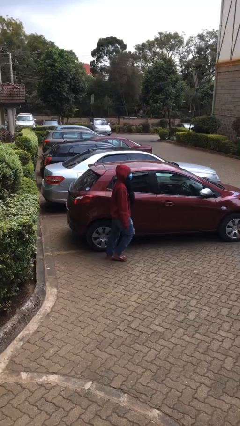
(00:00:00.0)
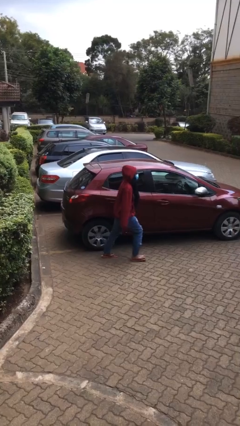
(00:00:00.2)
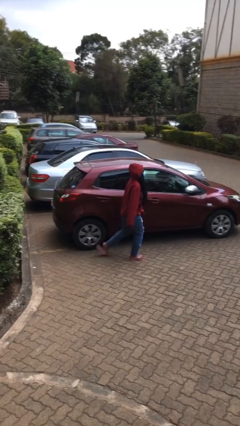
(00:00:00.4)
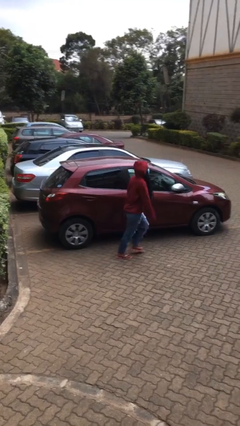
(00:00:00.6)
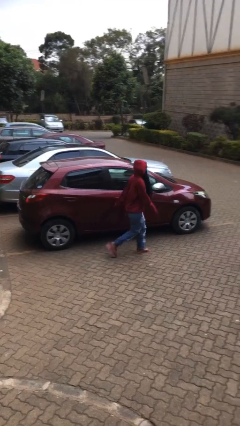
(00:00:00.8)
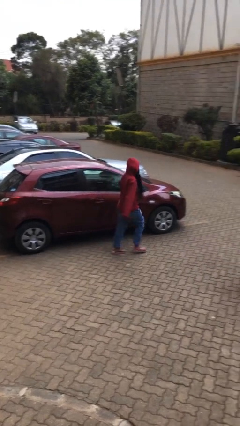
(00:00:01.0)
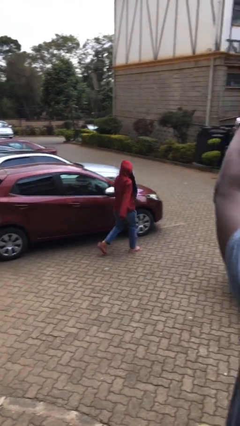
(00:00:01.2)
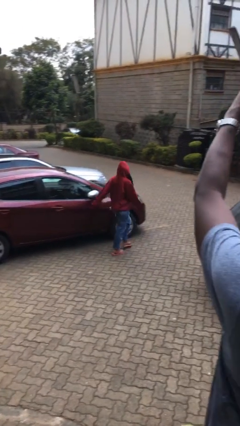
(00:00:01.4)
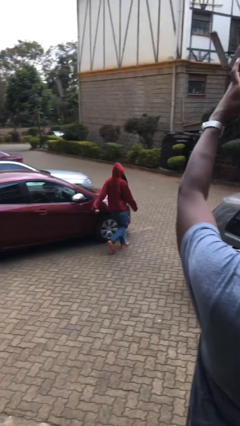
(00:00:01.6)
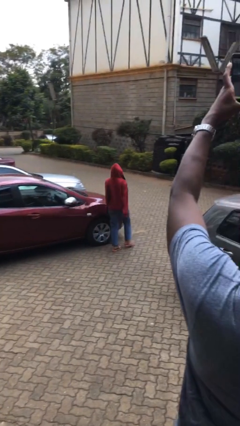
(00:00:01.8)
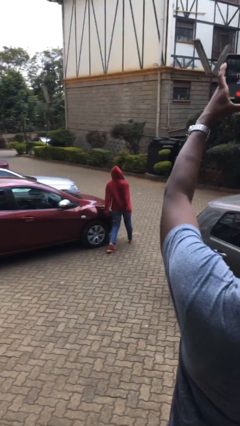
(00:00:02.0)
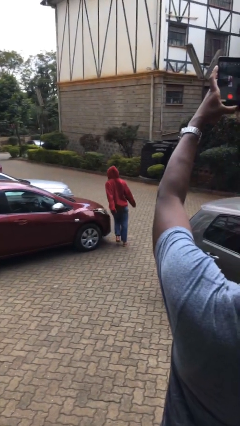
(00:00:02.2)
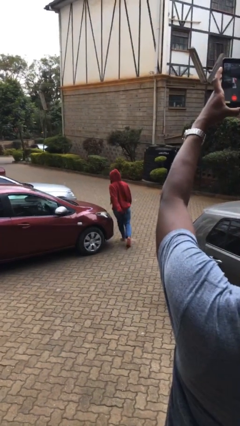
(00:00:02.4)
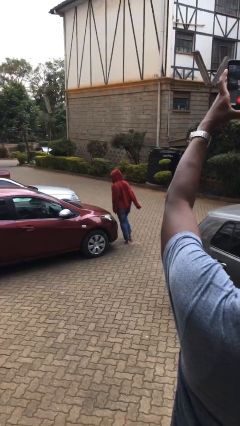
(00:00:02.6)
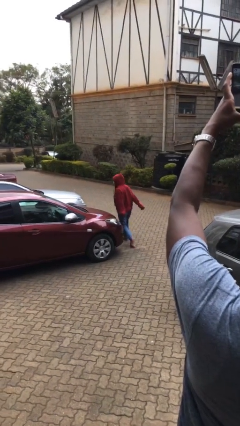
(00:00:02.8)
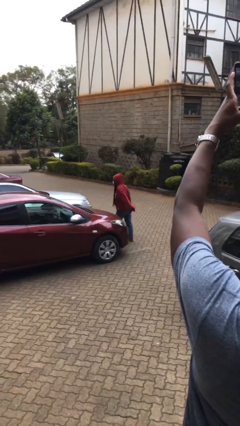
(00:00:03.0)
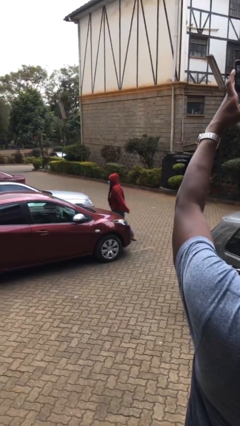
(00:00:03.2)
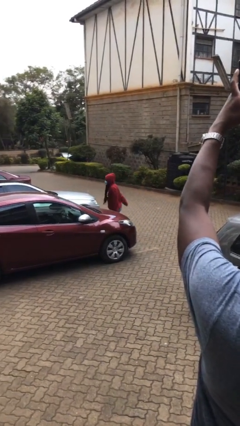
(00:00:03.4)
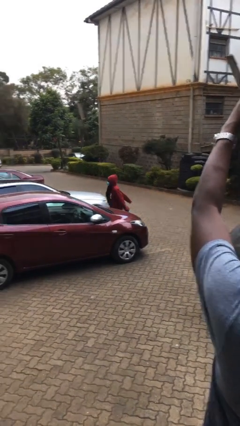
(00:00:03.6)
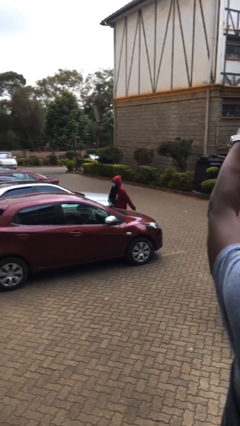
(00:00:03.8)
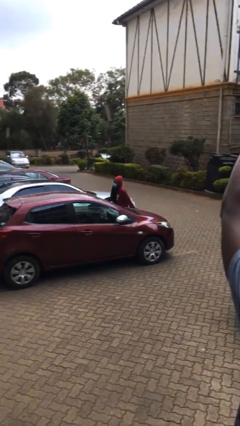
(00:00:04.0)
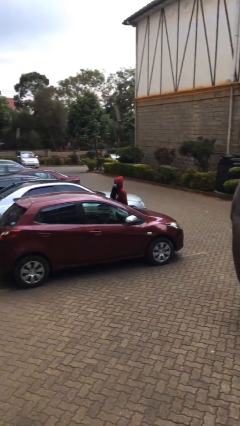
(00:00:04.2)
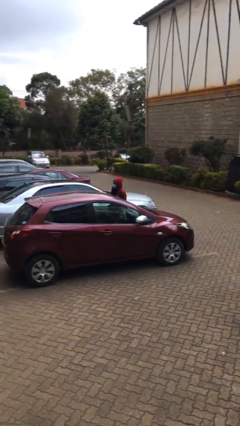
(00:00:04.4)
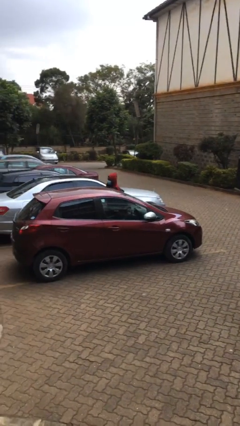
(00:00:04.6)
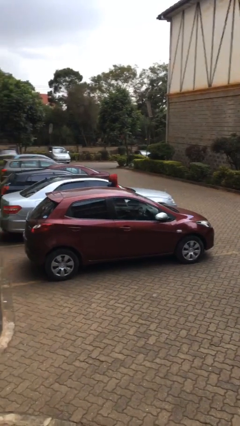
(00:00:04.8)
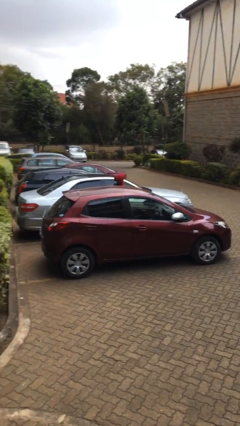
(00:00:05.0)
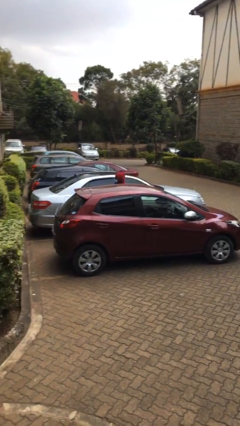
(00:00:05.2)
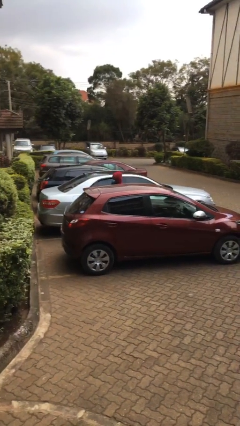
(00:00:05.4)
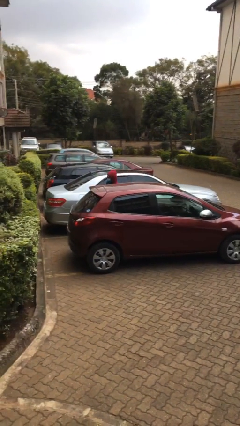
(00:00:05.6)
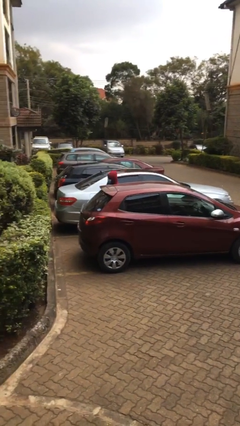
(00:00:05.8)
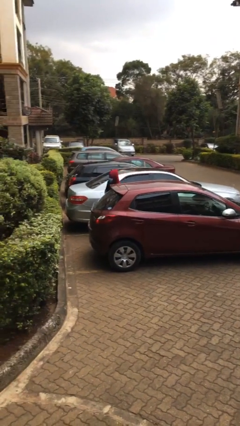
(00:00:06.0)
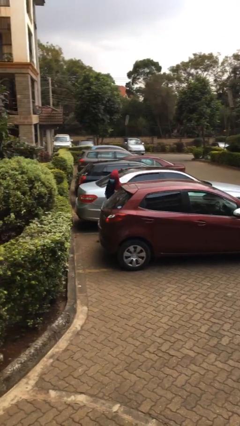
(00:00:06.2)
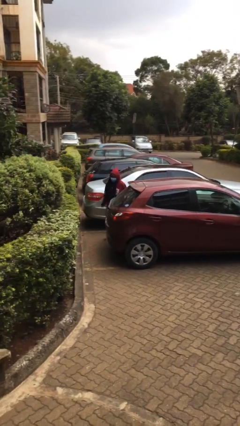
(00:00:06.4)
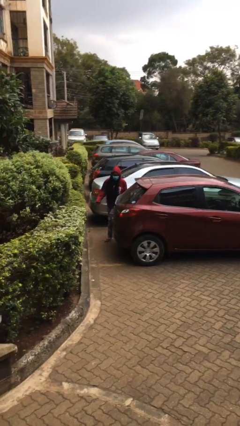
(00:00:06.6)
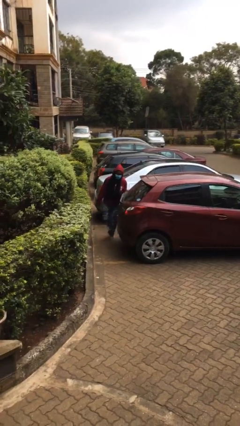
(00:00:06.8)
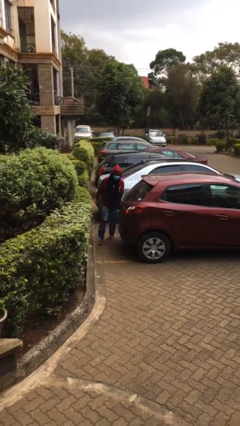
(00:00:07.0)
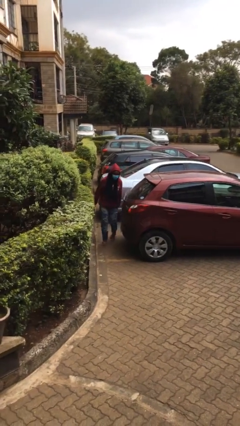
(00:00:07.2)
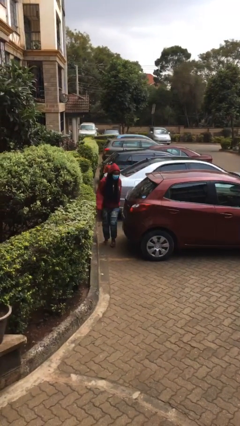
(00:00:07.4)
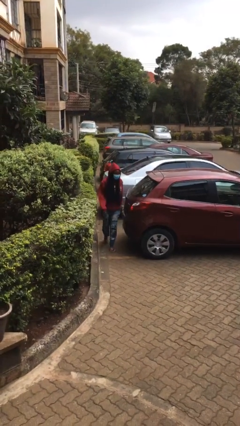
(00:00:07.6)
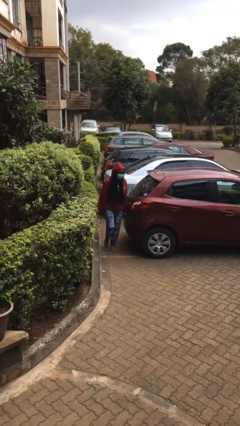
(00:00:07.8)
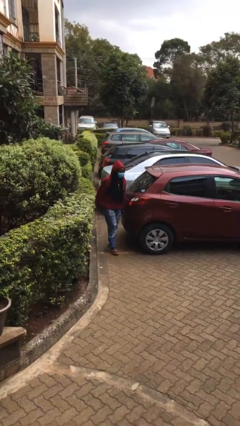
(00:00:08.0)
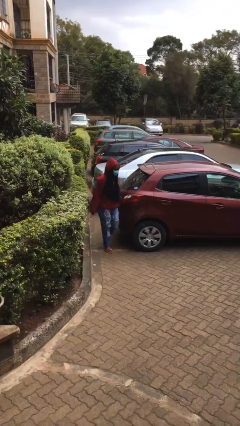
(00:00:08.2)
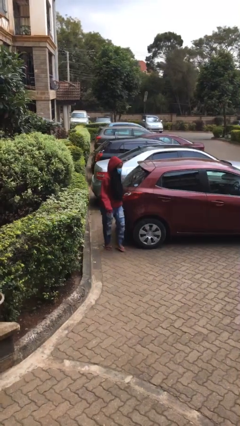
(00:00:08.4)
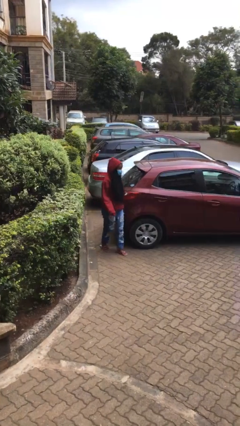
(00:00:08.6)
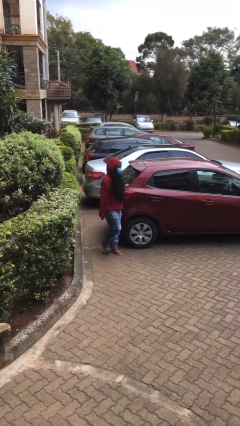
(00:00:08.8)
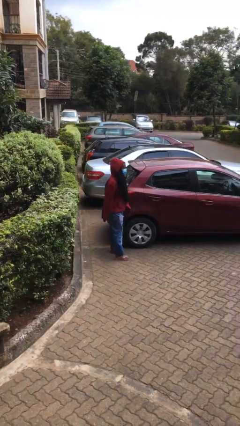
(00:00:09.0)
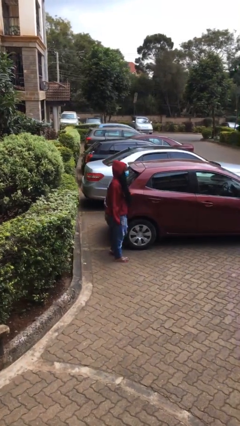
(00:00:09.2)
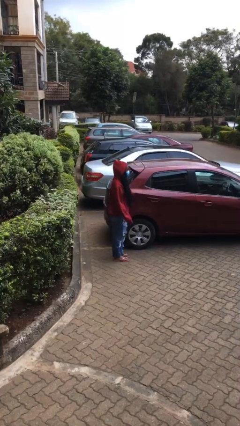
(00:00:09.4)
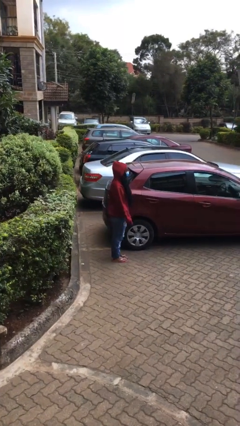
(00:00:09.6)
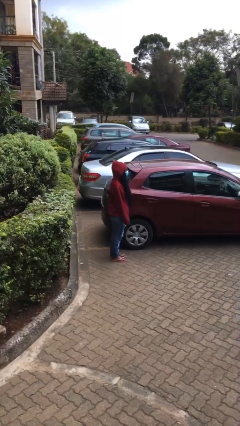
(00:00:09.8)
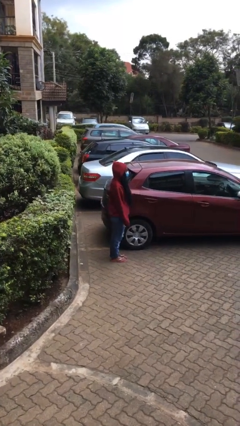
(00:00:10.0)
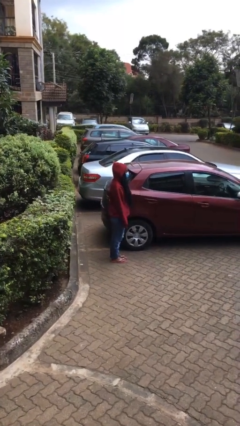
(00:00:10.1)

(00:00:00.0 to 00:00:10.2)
person walks around car

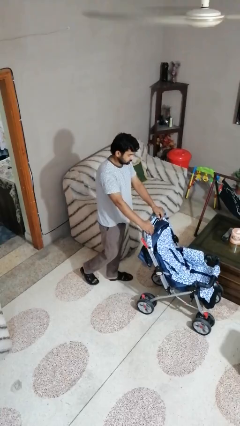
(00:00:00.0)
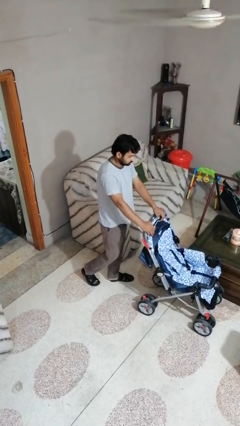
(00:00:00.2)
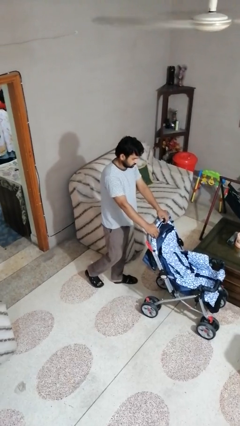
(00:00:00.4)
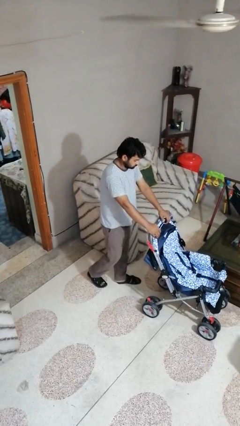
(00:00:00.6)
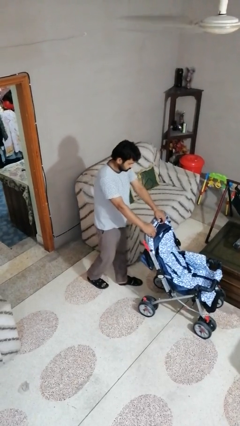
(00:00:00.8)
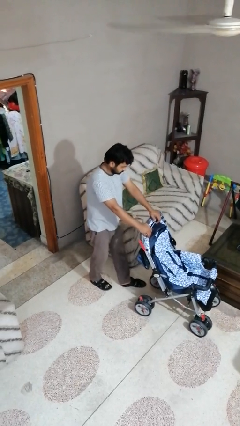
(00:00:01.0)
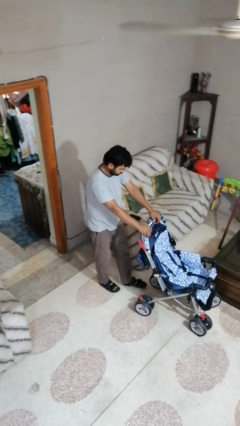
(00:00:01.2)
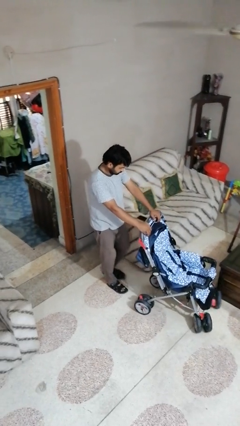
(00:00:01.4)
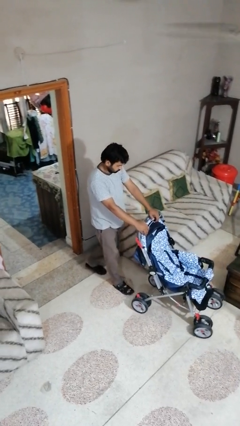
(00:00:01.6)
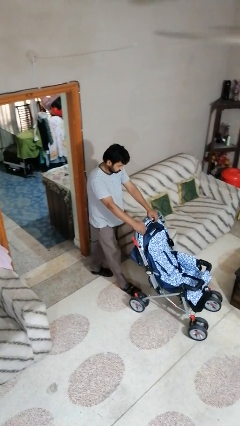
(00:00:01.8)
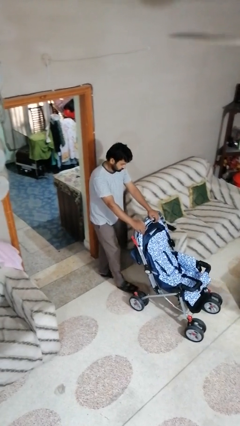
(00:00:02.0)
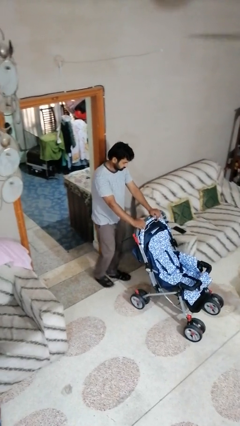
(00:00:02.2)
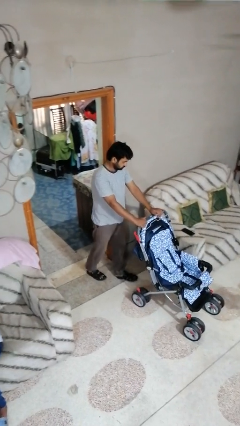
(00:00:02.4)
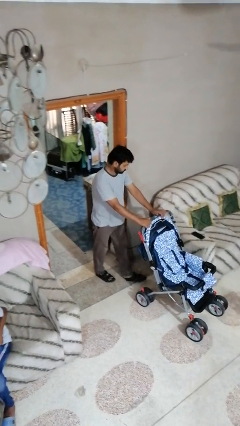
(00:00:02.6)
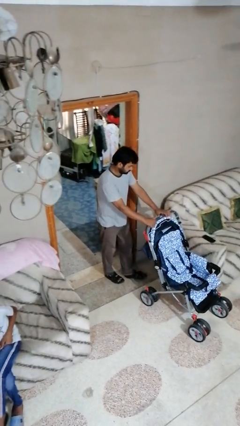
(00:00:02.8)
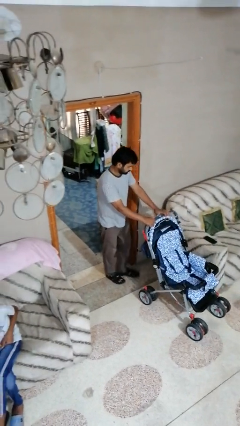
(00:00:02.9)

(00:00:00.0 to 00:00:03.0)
person pulls wheeled cart

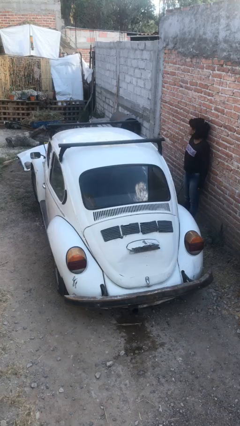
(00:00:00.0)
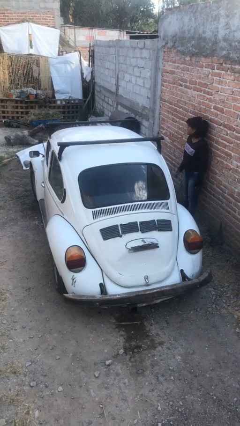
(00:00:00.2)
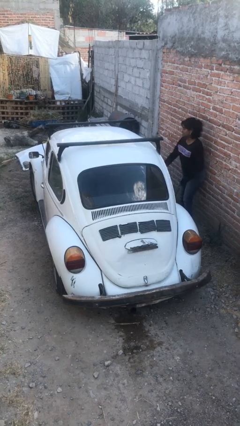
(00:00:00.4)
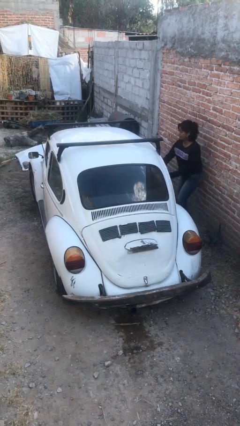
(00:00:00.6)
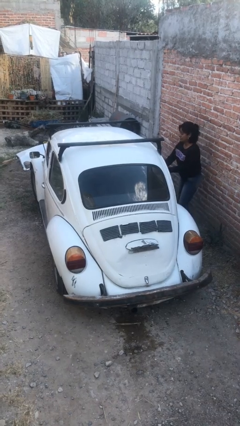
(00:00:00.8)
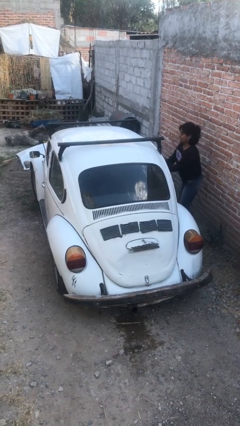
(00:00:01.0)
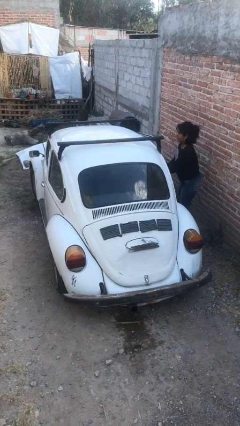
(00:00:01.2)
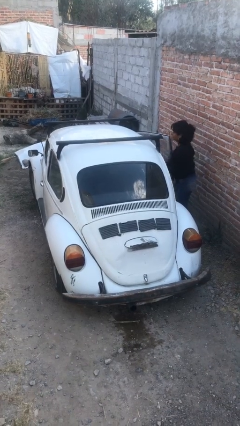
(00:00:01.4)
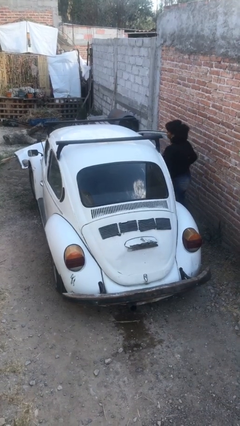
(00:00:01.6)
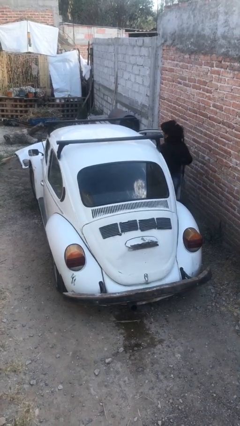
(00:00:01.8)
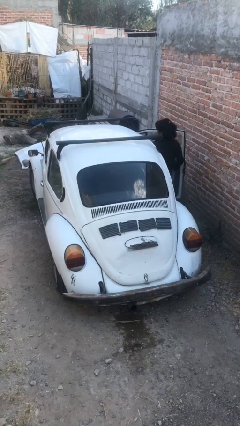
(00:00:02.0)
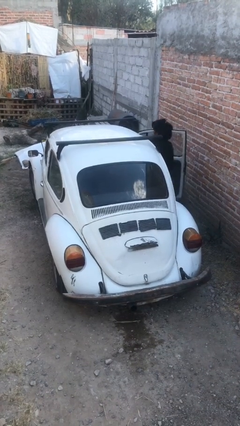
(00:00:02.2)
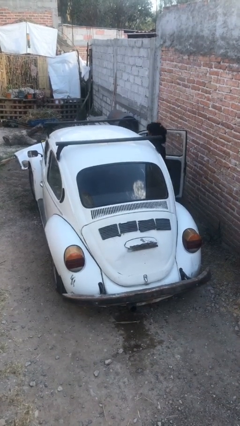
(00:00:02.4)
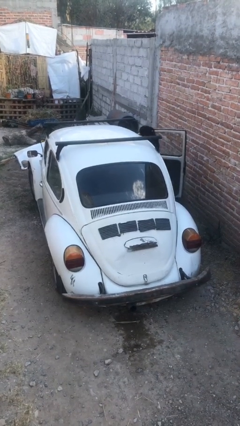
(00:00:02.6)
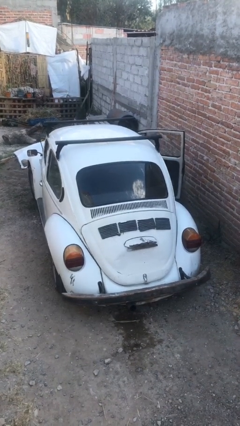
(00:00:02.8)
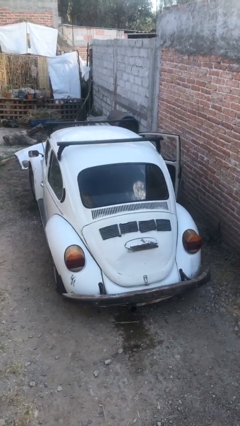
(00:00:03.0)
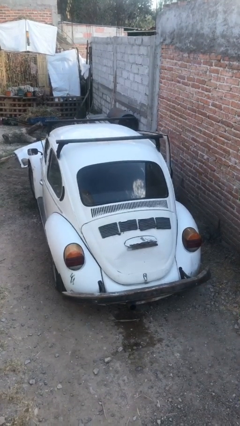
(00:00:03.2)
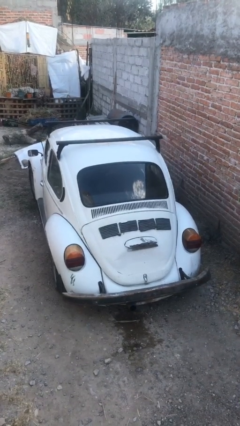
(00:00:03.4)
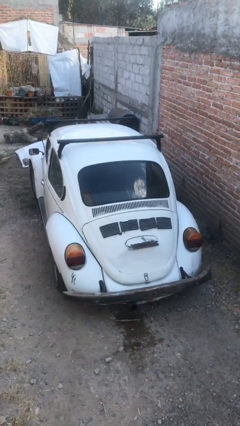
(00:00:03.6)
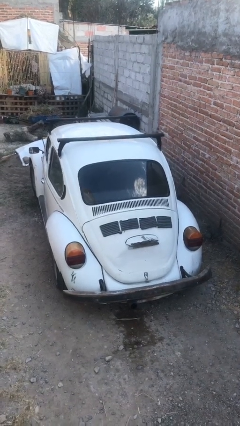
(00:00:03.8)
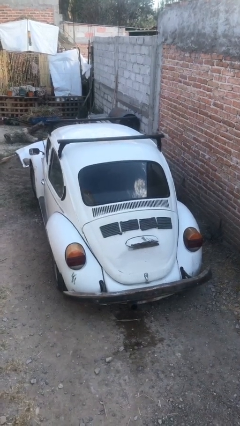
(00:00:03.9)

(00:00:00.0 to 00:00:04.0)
car picks up person

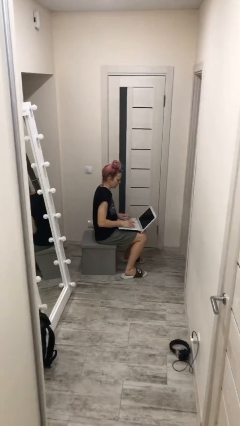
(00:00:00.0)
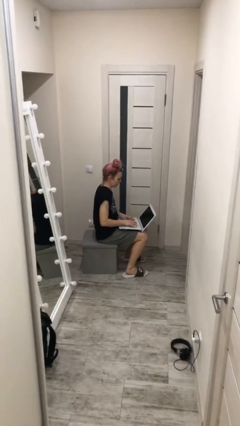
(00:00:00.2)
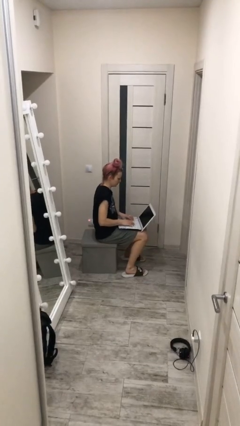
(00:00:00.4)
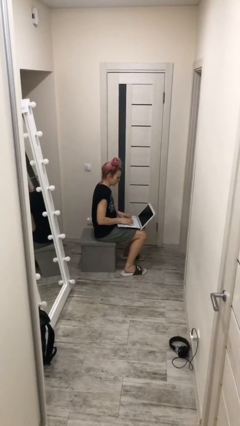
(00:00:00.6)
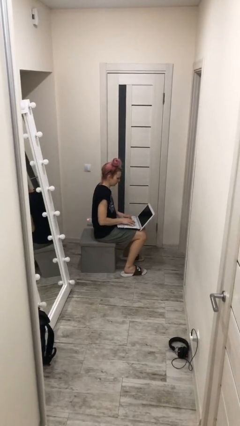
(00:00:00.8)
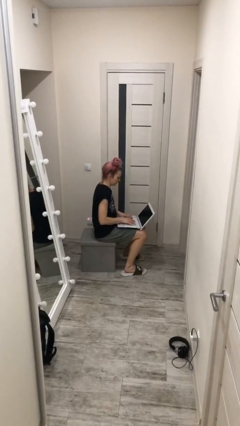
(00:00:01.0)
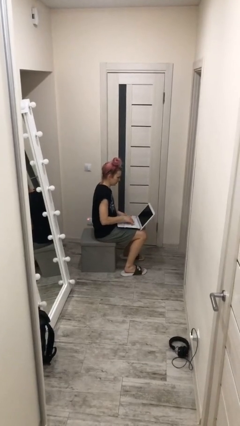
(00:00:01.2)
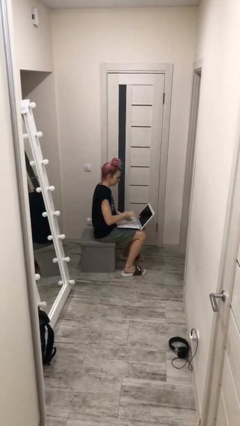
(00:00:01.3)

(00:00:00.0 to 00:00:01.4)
person interacts with laptop
